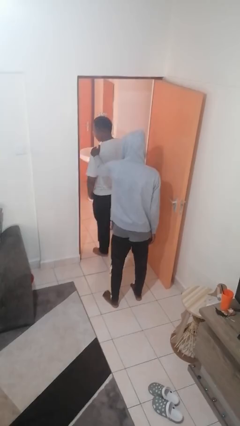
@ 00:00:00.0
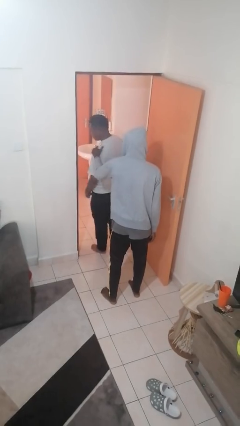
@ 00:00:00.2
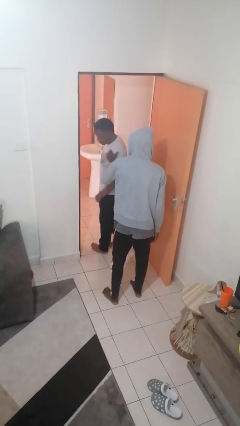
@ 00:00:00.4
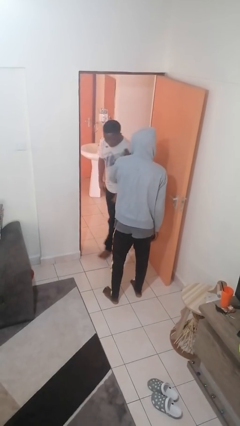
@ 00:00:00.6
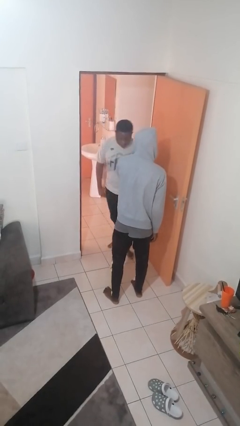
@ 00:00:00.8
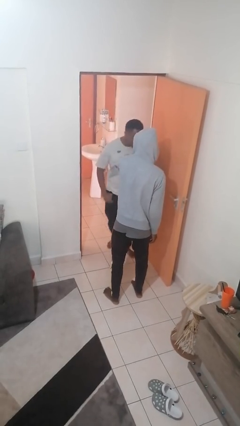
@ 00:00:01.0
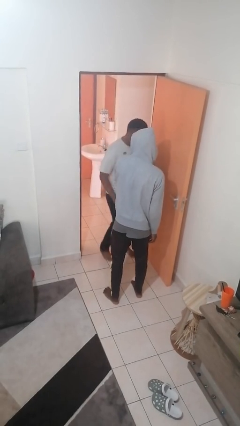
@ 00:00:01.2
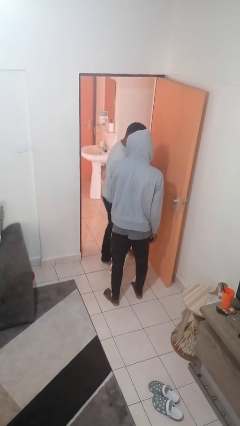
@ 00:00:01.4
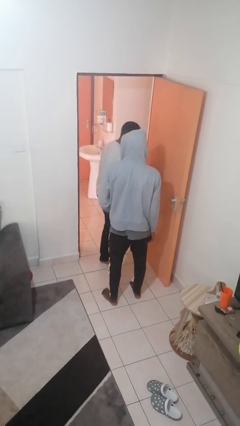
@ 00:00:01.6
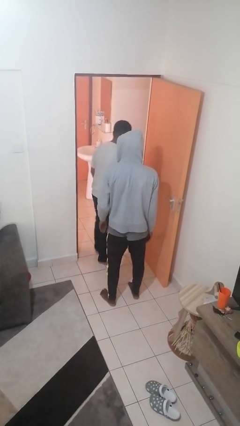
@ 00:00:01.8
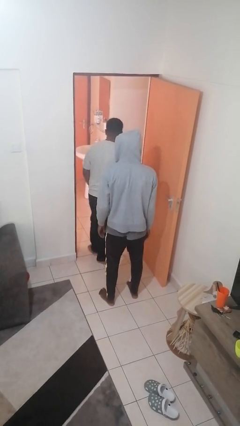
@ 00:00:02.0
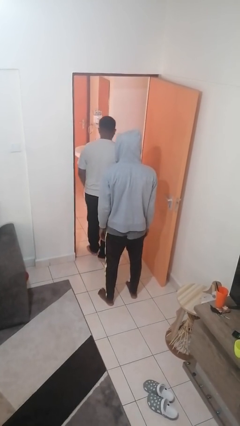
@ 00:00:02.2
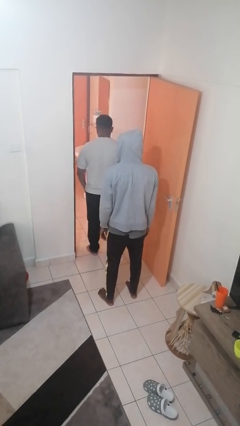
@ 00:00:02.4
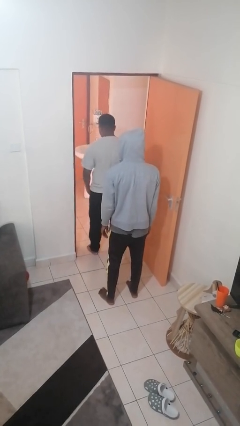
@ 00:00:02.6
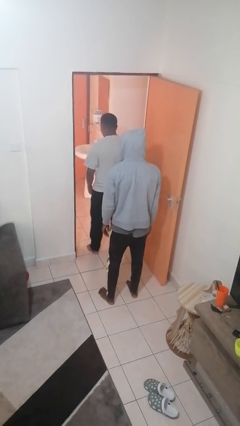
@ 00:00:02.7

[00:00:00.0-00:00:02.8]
person spins person around

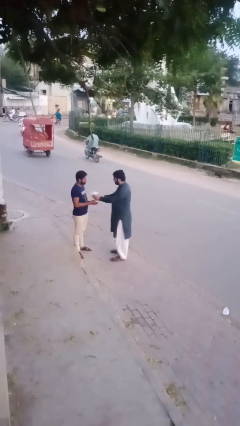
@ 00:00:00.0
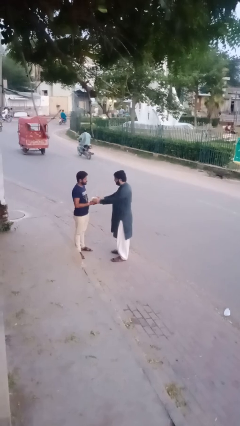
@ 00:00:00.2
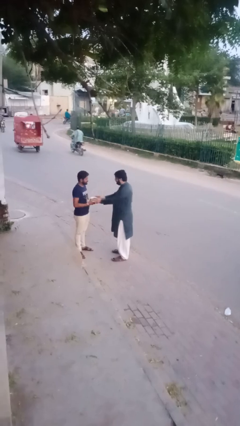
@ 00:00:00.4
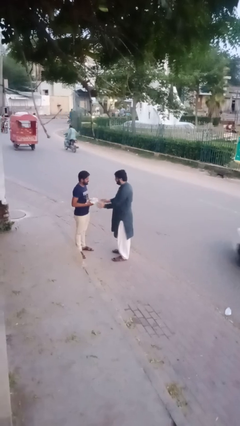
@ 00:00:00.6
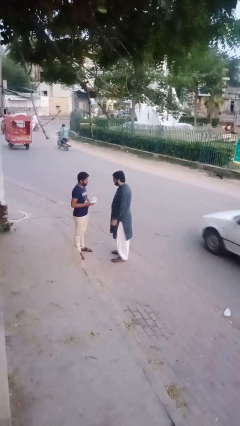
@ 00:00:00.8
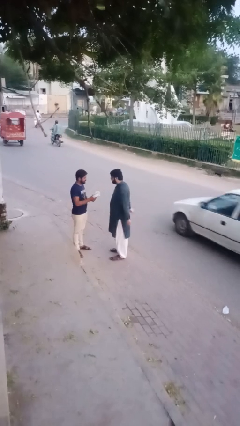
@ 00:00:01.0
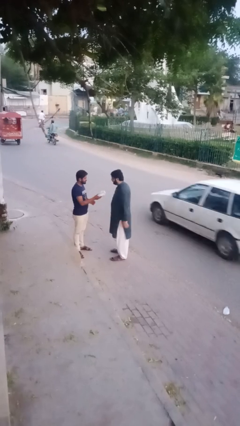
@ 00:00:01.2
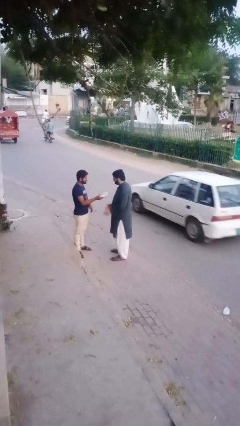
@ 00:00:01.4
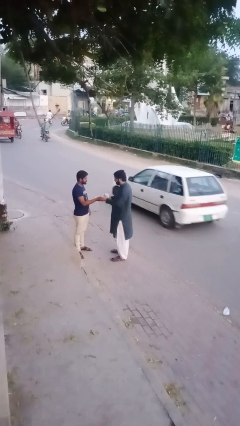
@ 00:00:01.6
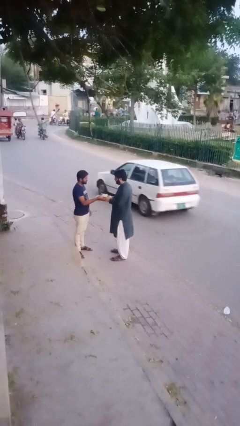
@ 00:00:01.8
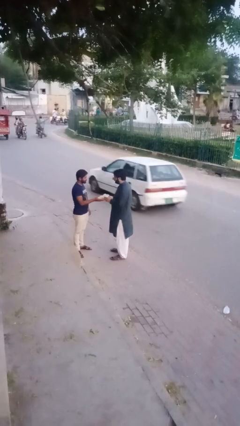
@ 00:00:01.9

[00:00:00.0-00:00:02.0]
person transfers object to person

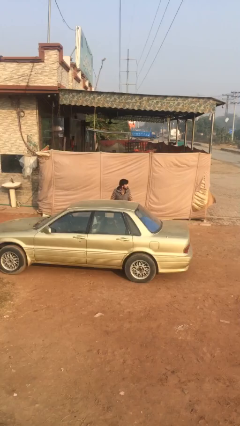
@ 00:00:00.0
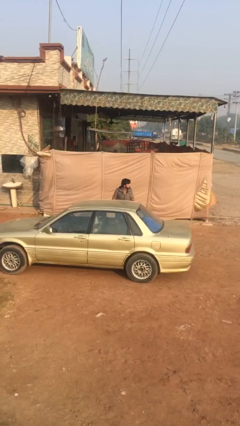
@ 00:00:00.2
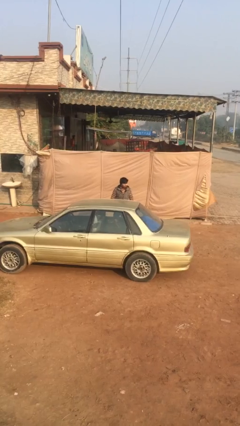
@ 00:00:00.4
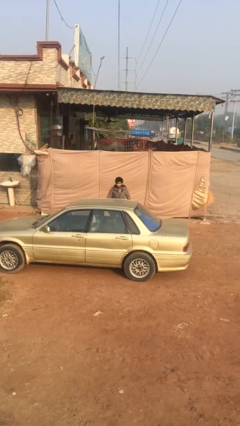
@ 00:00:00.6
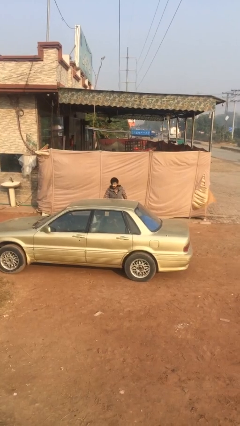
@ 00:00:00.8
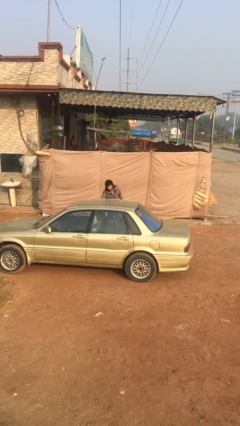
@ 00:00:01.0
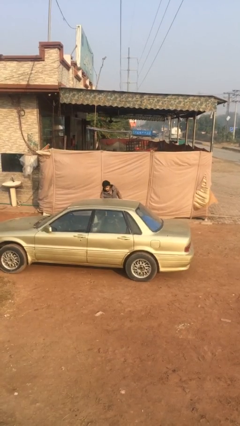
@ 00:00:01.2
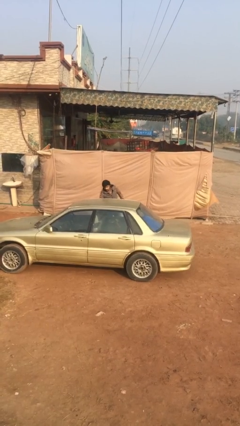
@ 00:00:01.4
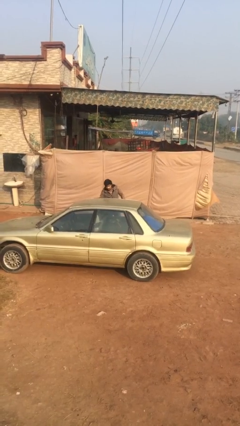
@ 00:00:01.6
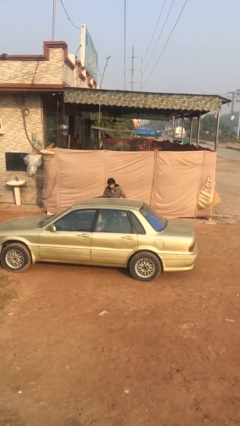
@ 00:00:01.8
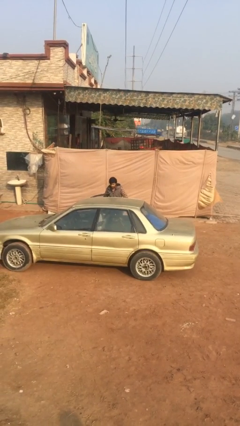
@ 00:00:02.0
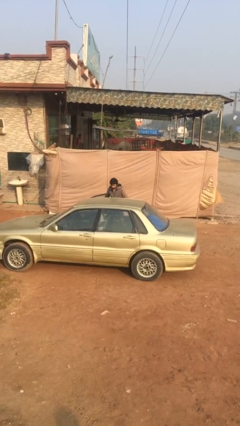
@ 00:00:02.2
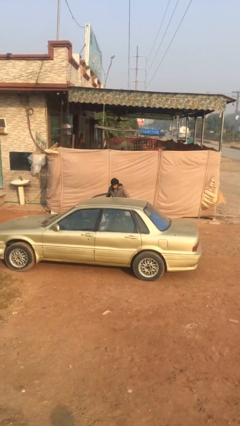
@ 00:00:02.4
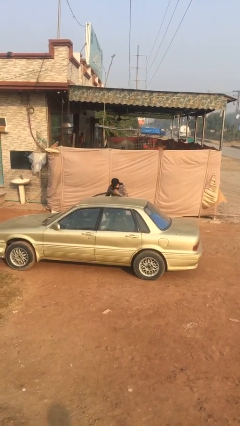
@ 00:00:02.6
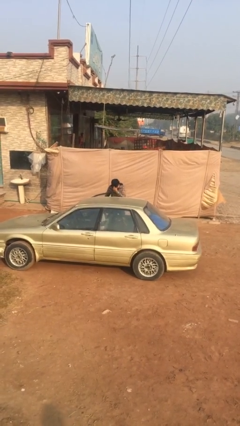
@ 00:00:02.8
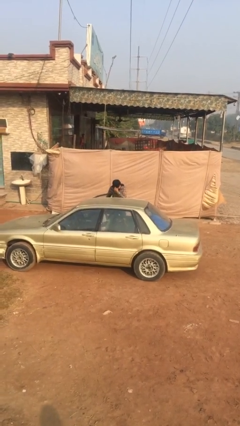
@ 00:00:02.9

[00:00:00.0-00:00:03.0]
person opens car door

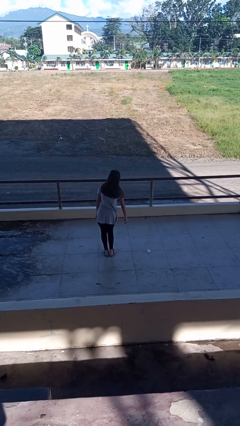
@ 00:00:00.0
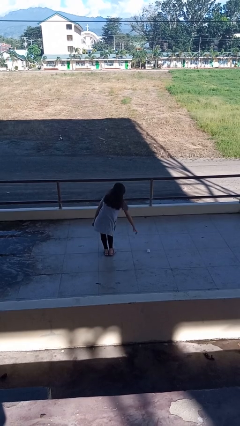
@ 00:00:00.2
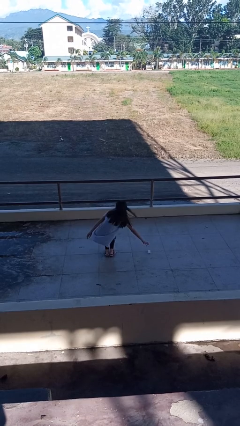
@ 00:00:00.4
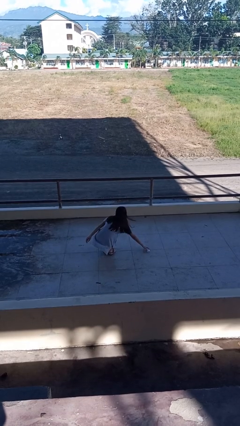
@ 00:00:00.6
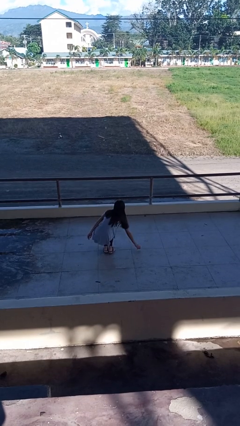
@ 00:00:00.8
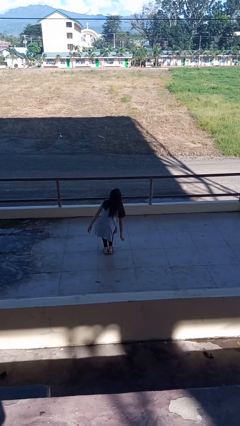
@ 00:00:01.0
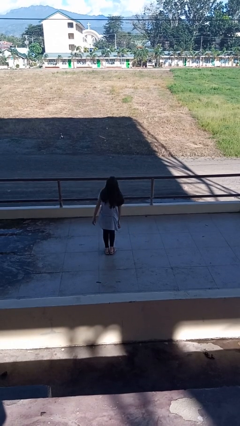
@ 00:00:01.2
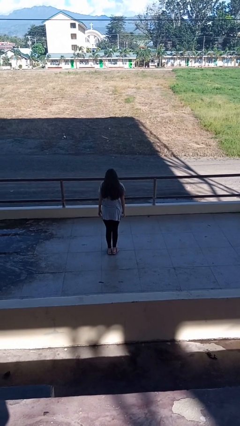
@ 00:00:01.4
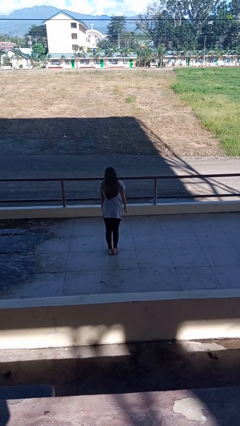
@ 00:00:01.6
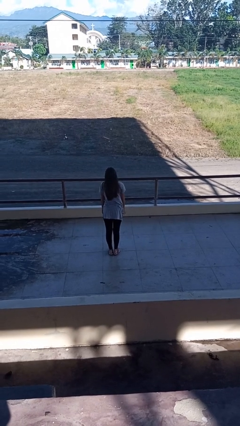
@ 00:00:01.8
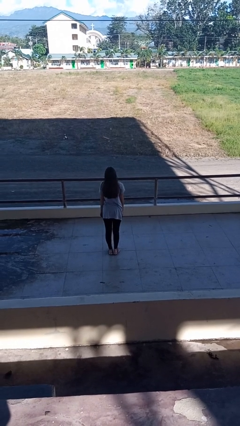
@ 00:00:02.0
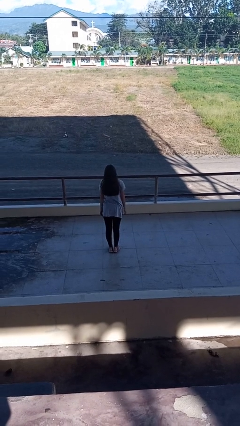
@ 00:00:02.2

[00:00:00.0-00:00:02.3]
person picks up object from floor

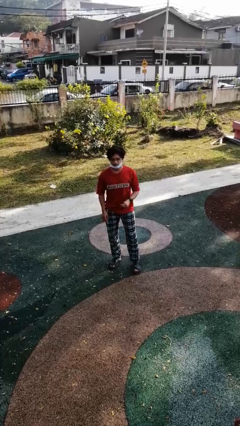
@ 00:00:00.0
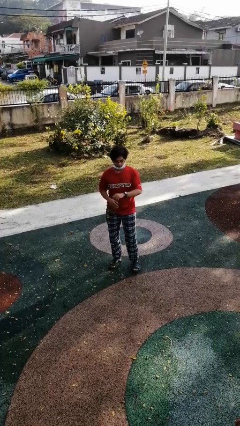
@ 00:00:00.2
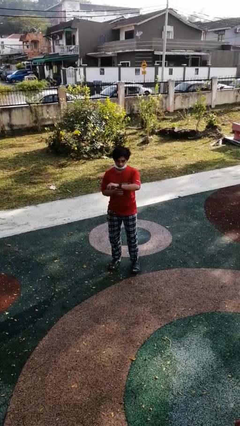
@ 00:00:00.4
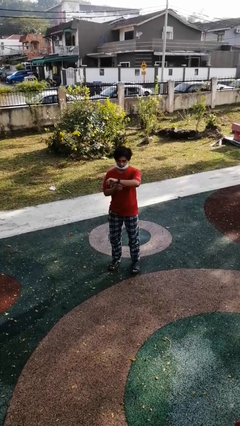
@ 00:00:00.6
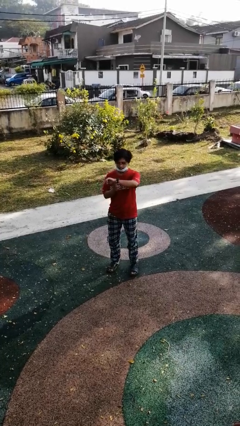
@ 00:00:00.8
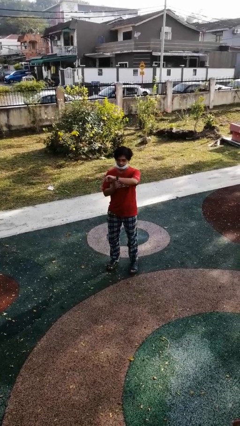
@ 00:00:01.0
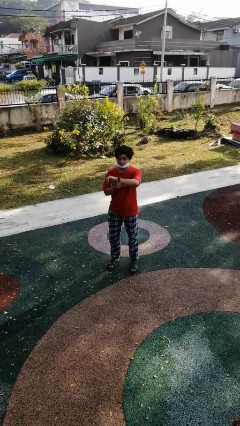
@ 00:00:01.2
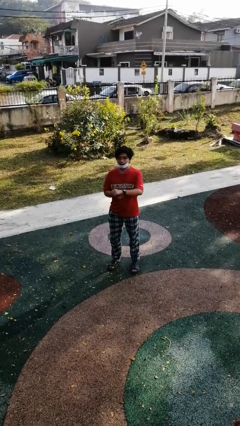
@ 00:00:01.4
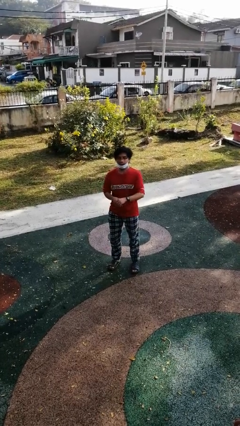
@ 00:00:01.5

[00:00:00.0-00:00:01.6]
person looks at wristwatch

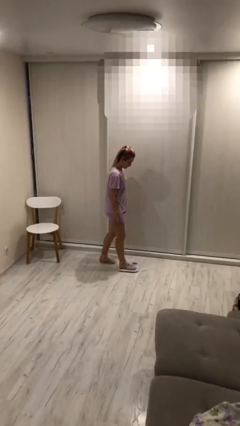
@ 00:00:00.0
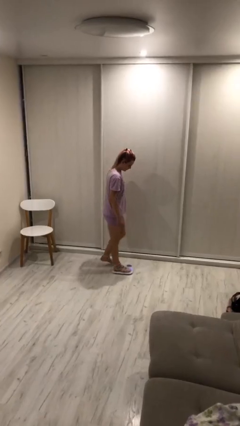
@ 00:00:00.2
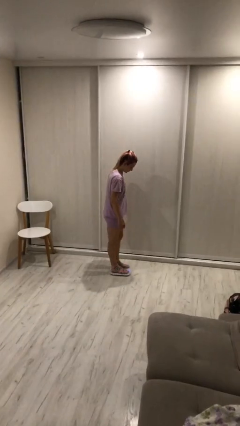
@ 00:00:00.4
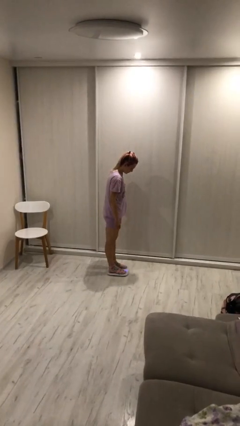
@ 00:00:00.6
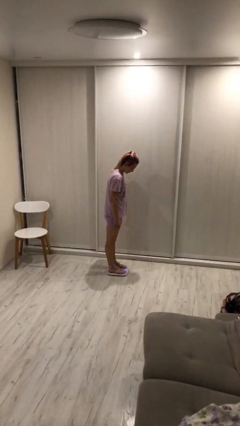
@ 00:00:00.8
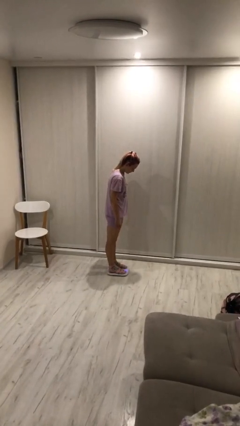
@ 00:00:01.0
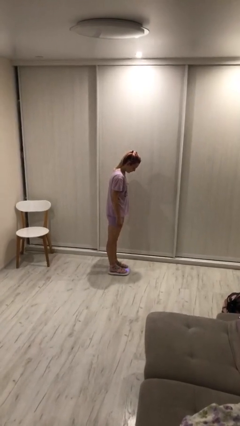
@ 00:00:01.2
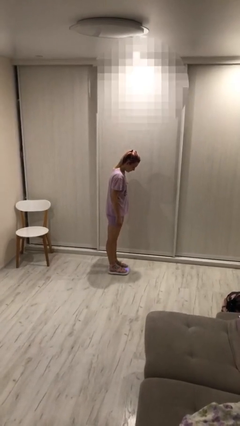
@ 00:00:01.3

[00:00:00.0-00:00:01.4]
person uses bodyweight scale

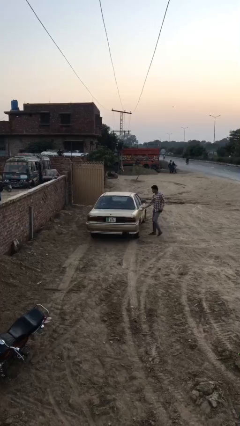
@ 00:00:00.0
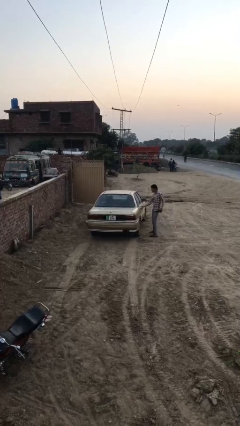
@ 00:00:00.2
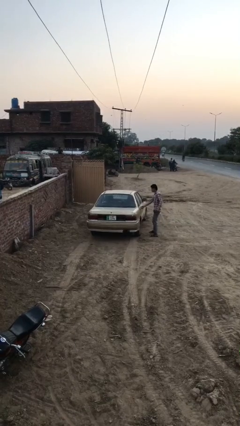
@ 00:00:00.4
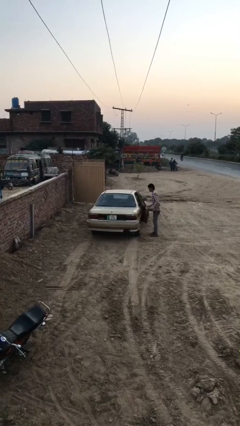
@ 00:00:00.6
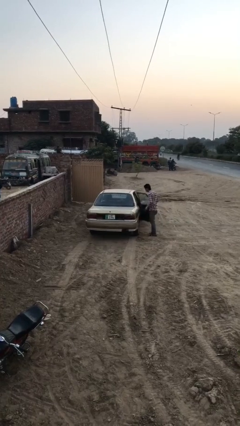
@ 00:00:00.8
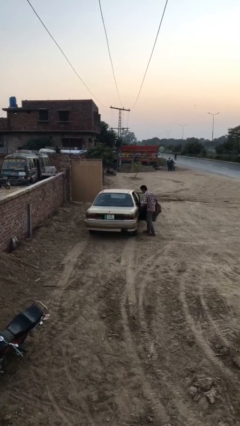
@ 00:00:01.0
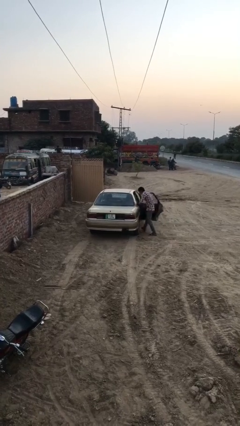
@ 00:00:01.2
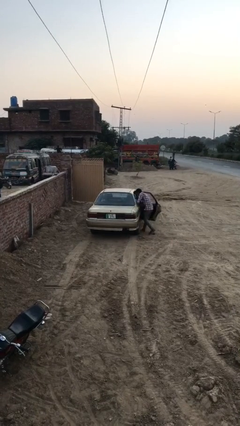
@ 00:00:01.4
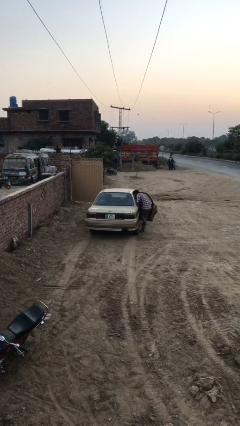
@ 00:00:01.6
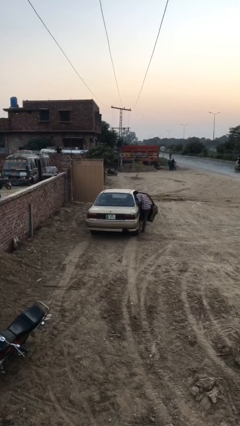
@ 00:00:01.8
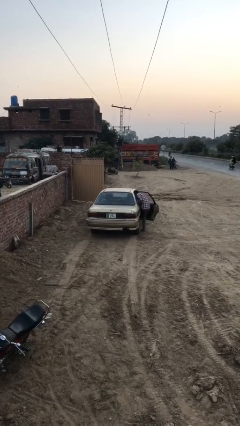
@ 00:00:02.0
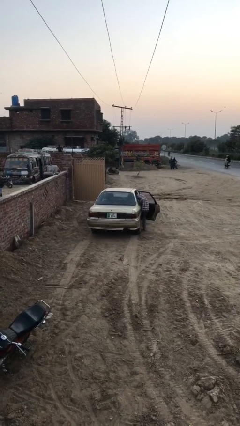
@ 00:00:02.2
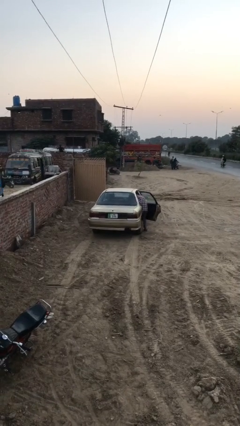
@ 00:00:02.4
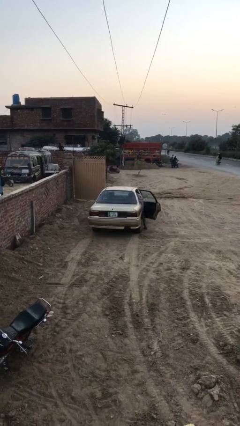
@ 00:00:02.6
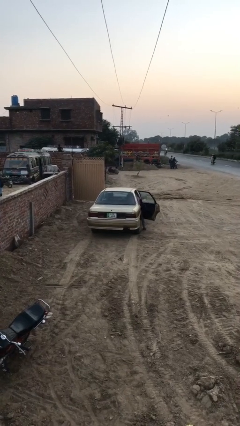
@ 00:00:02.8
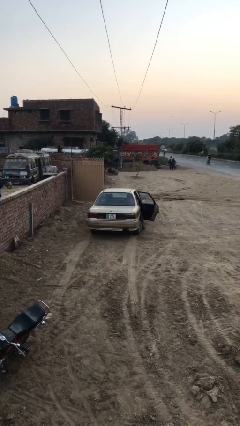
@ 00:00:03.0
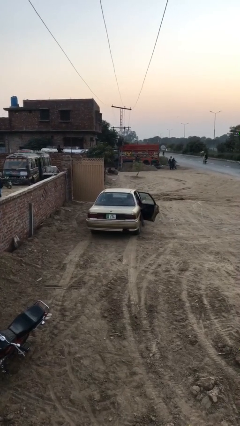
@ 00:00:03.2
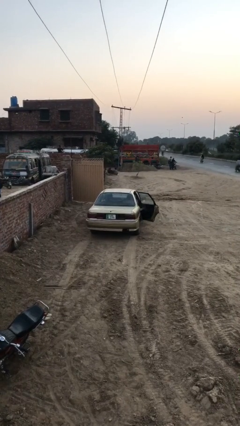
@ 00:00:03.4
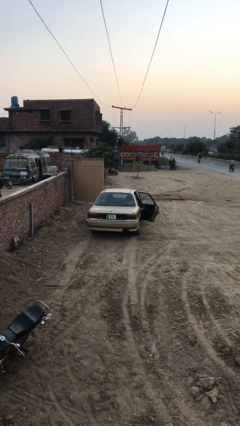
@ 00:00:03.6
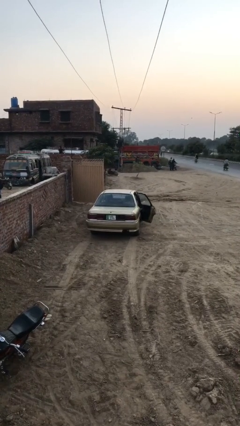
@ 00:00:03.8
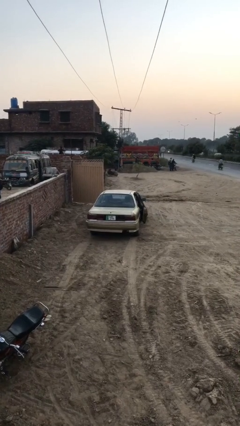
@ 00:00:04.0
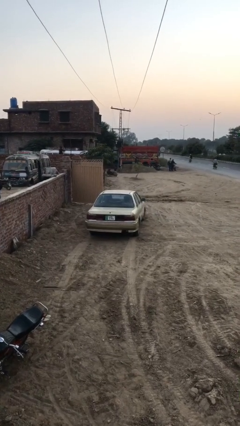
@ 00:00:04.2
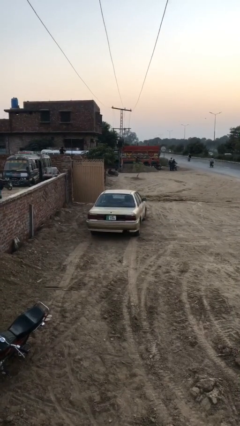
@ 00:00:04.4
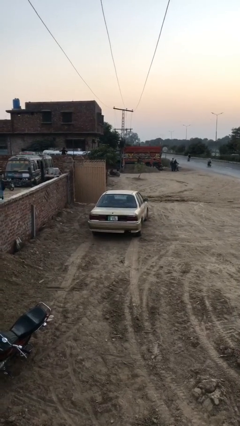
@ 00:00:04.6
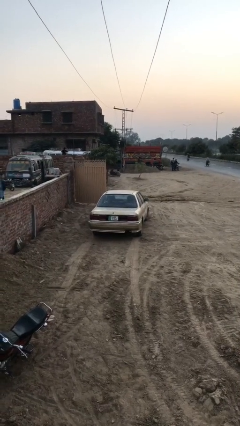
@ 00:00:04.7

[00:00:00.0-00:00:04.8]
car picks up person
